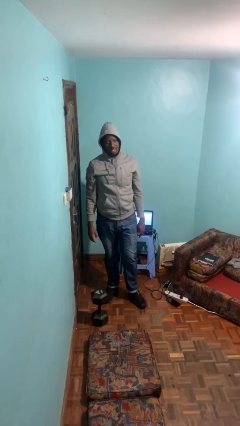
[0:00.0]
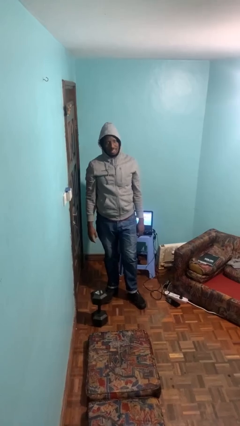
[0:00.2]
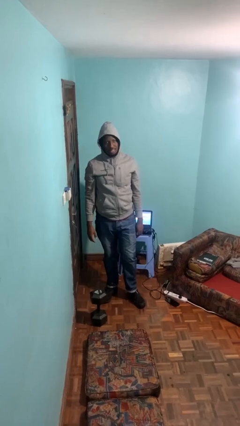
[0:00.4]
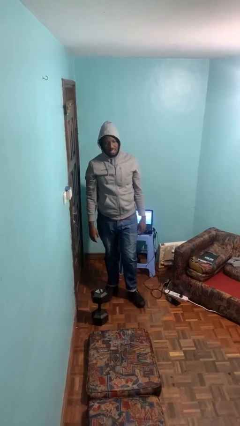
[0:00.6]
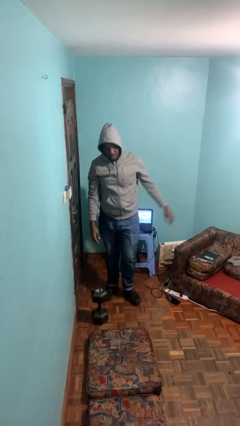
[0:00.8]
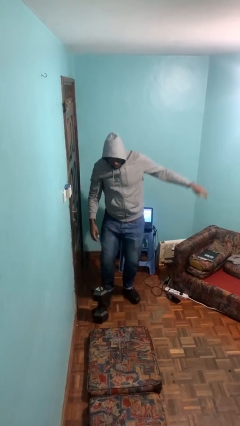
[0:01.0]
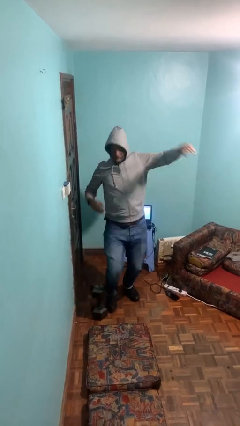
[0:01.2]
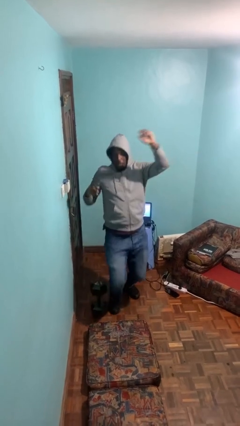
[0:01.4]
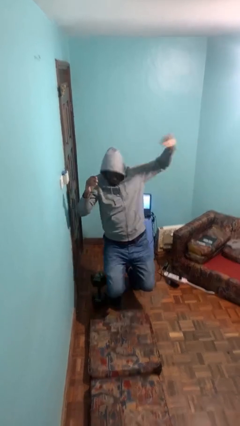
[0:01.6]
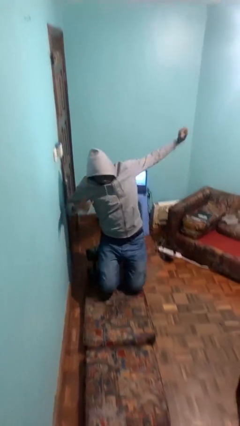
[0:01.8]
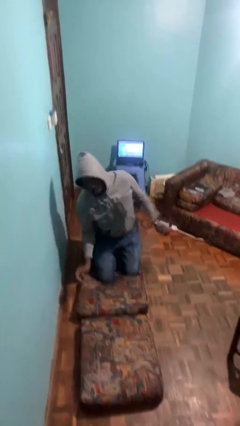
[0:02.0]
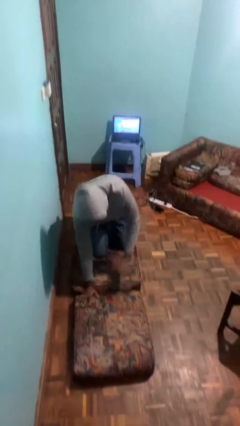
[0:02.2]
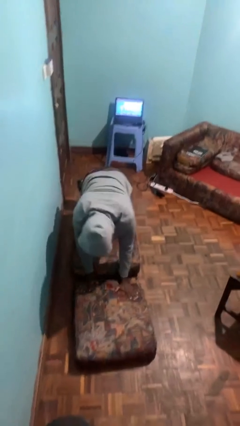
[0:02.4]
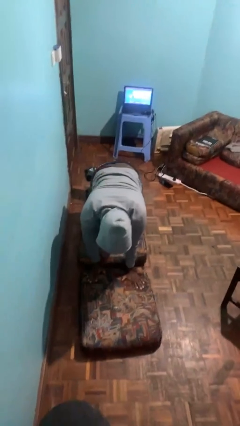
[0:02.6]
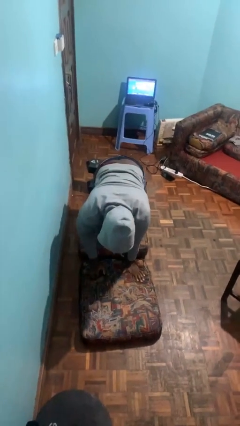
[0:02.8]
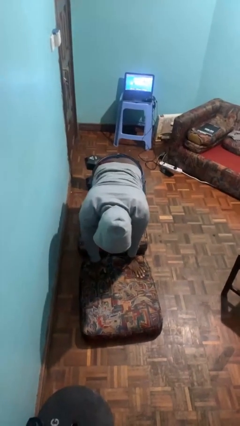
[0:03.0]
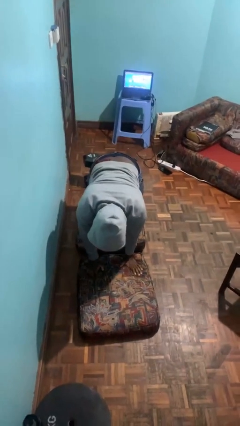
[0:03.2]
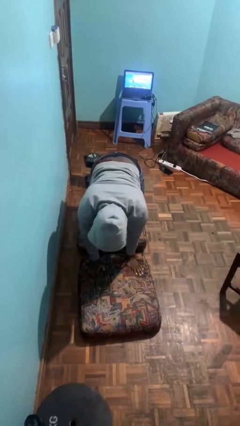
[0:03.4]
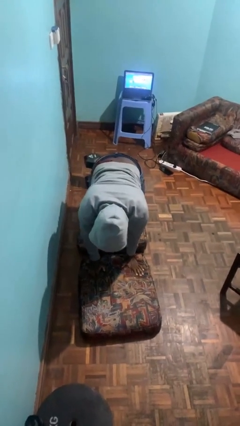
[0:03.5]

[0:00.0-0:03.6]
person trips on object on floor

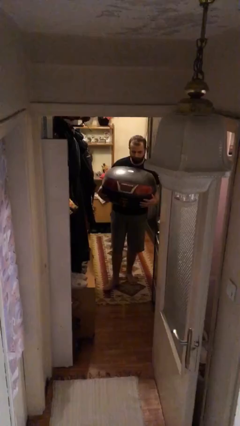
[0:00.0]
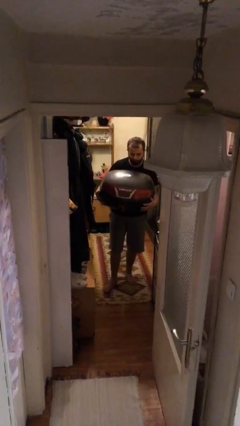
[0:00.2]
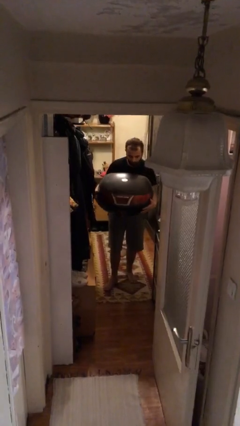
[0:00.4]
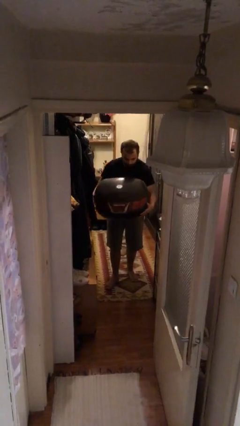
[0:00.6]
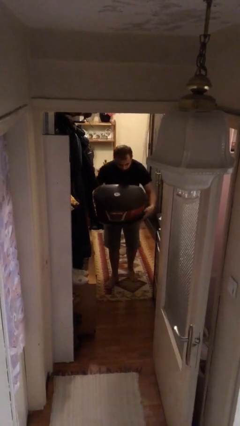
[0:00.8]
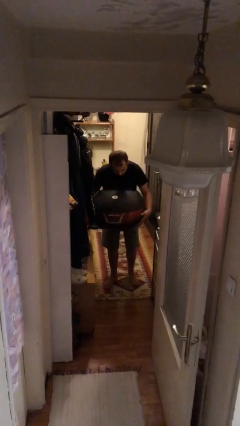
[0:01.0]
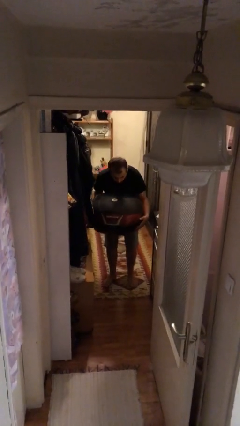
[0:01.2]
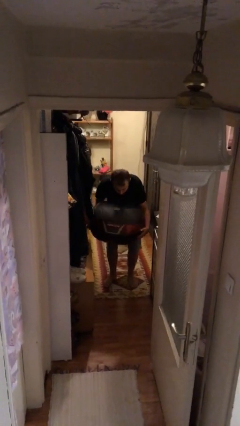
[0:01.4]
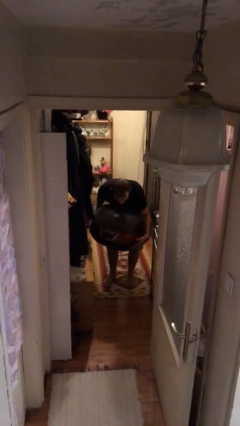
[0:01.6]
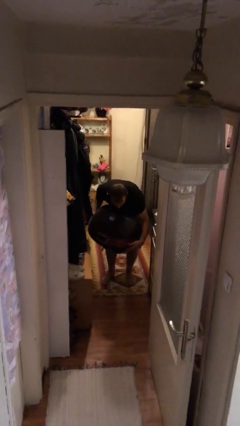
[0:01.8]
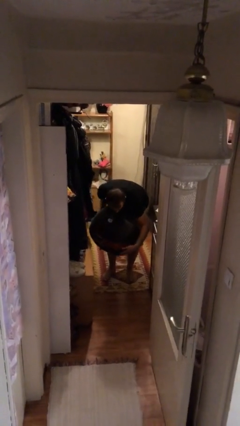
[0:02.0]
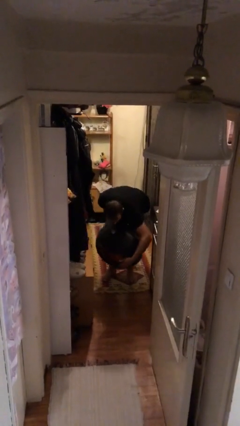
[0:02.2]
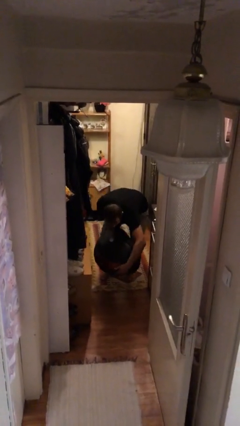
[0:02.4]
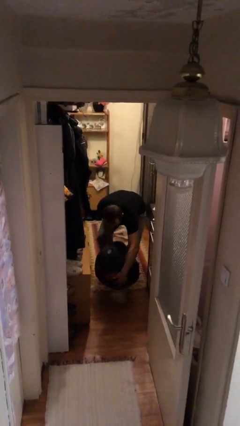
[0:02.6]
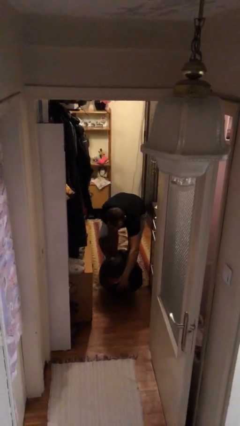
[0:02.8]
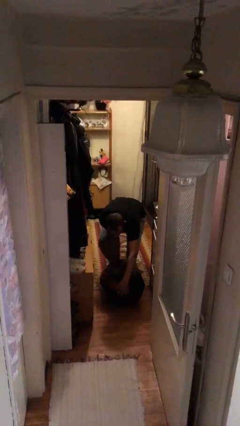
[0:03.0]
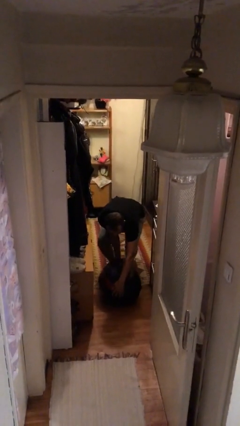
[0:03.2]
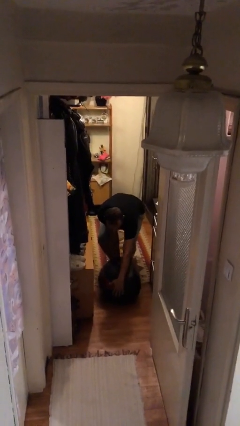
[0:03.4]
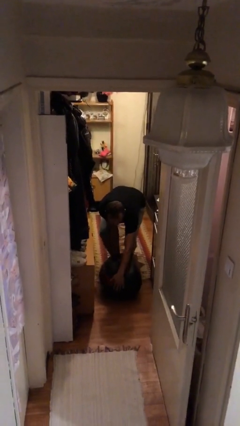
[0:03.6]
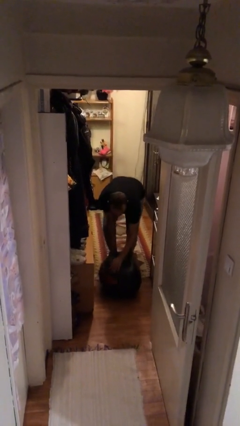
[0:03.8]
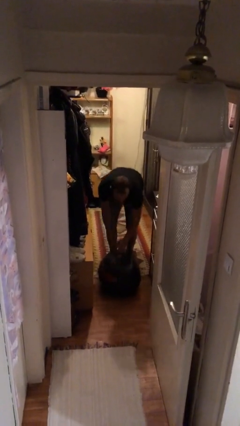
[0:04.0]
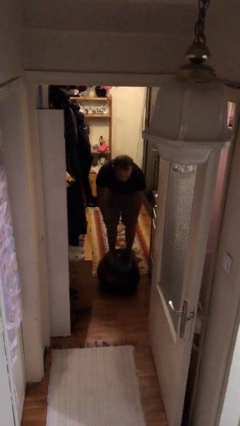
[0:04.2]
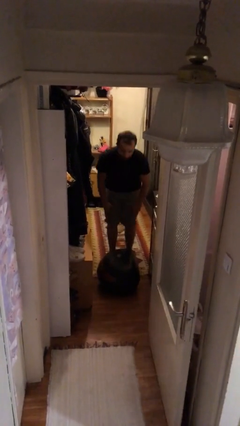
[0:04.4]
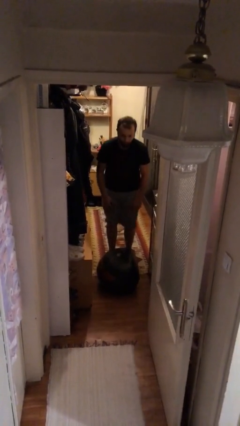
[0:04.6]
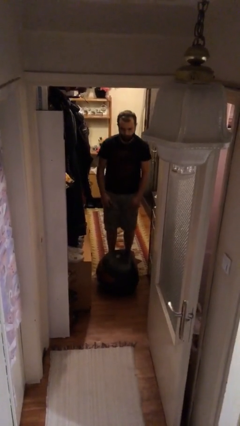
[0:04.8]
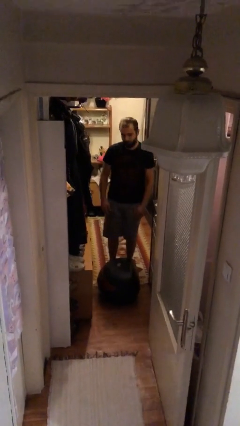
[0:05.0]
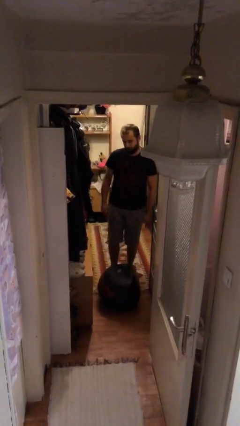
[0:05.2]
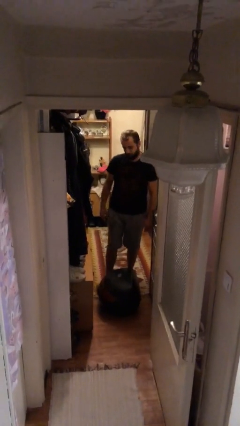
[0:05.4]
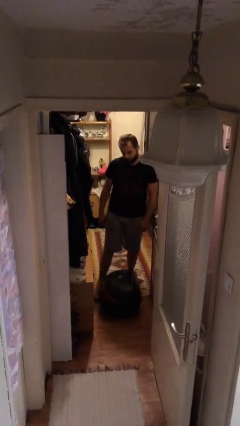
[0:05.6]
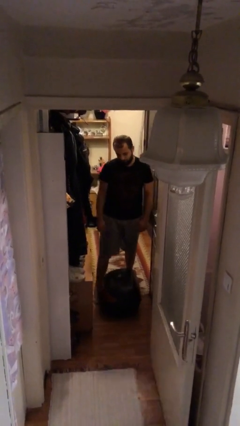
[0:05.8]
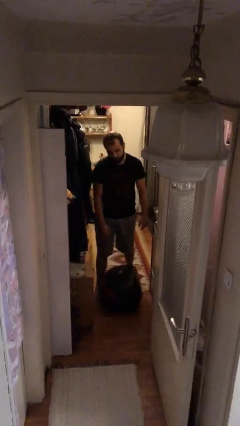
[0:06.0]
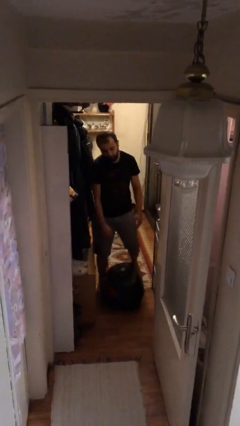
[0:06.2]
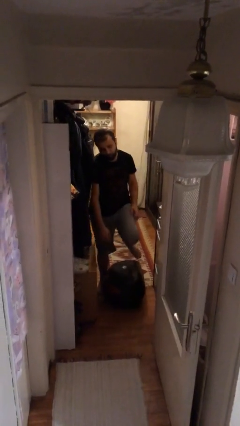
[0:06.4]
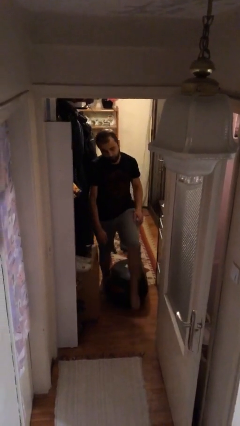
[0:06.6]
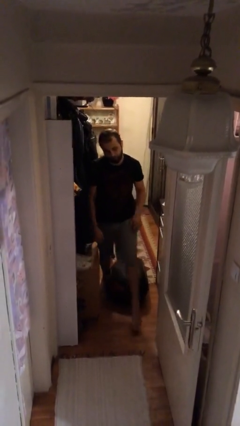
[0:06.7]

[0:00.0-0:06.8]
person puts down object on floor

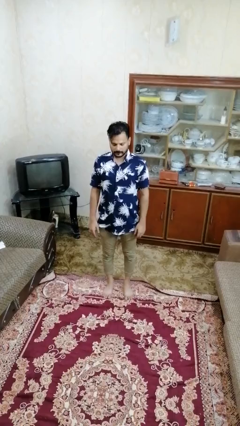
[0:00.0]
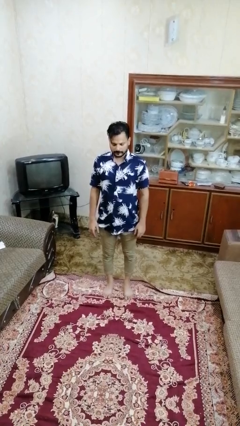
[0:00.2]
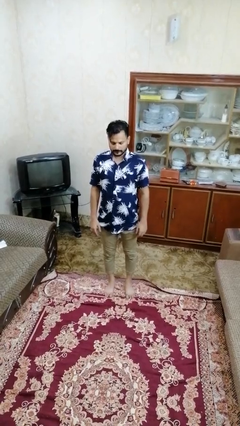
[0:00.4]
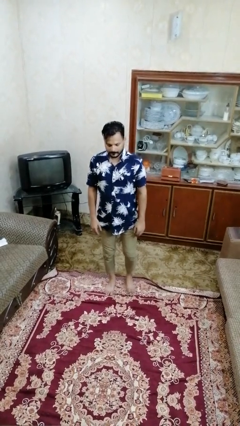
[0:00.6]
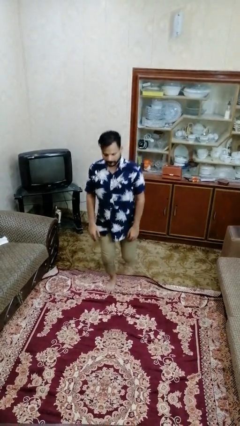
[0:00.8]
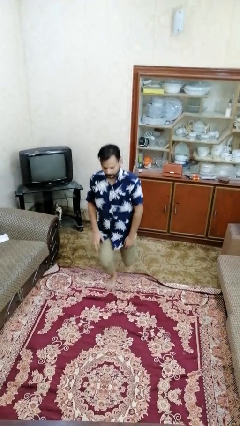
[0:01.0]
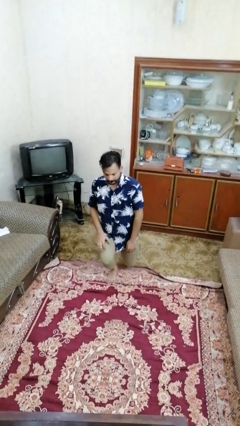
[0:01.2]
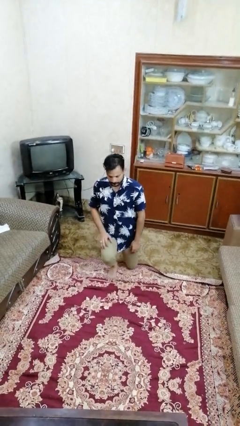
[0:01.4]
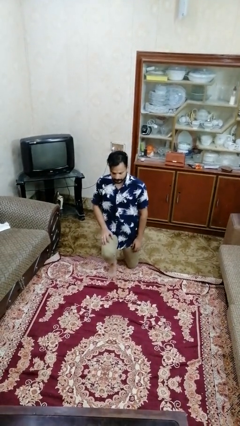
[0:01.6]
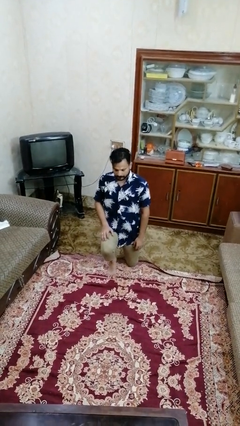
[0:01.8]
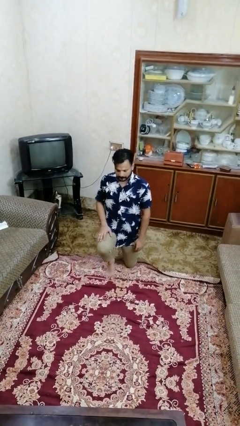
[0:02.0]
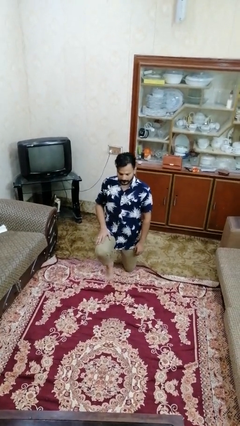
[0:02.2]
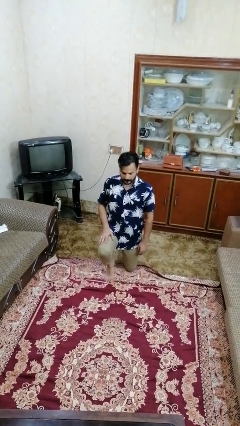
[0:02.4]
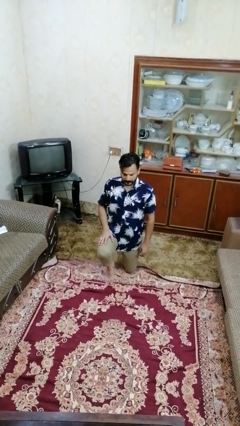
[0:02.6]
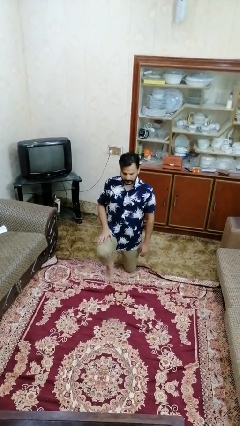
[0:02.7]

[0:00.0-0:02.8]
person kneels

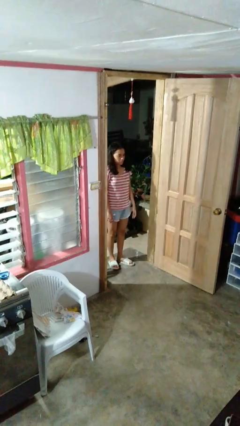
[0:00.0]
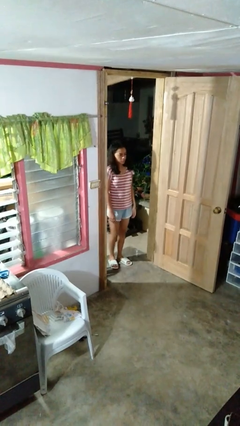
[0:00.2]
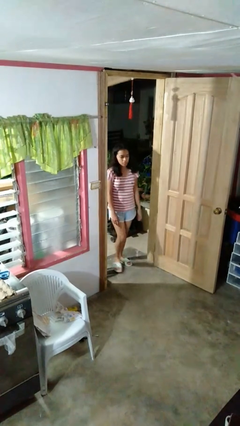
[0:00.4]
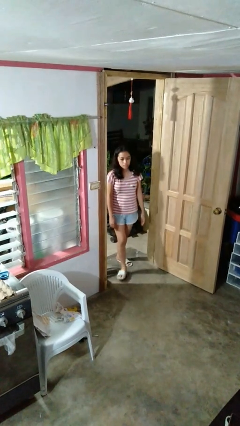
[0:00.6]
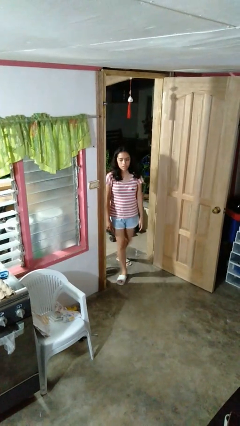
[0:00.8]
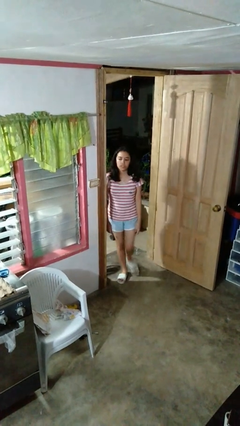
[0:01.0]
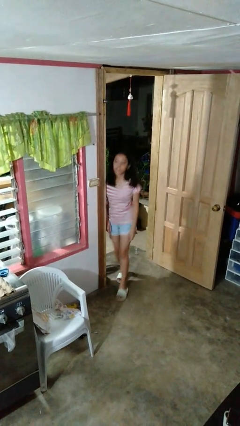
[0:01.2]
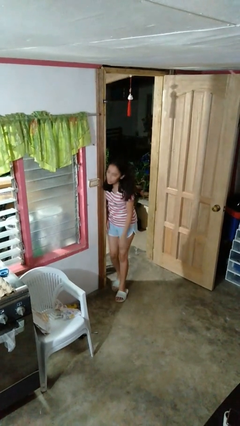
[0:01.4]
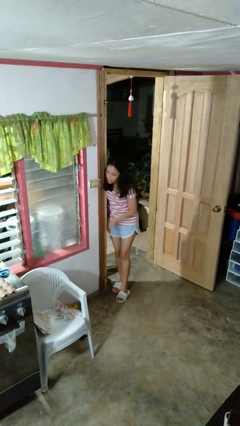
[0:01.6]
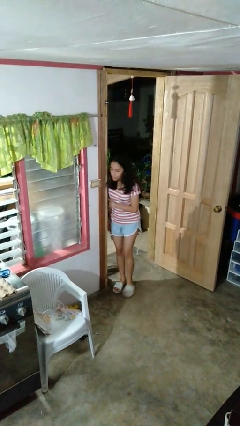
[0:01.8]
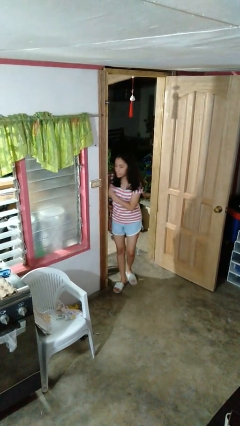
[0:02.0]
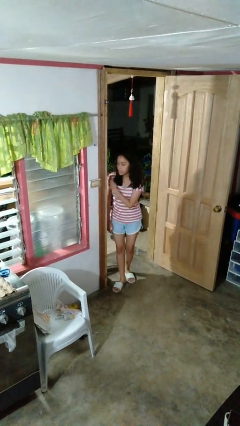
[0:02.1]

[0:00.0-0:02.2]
person bumps into wall

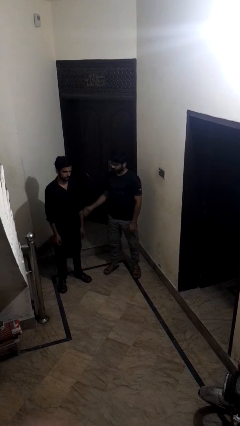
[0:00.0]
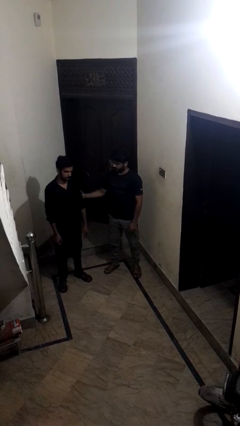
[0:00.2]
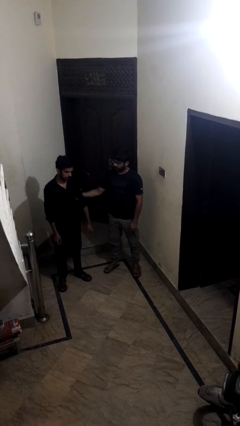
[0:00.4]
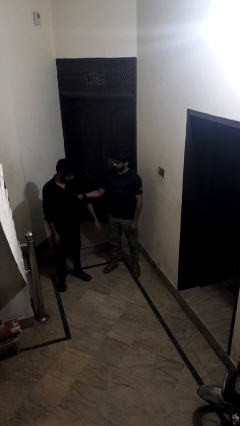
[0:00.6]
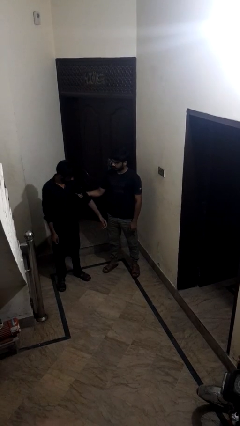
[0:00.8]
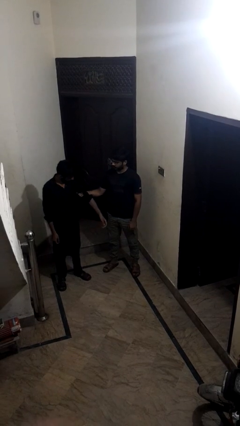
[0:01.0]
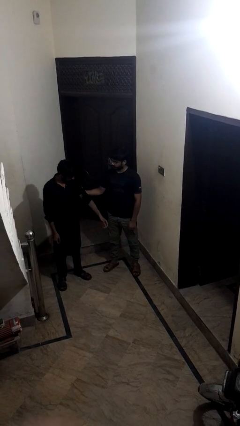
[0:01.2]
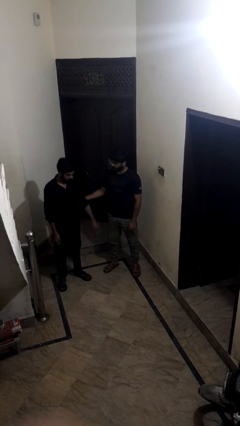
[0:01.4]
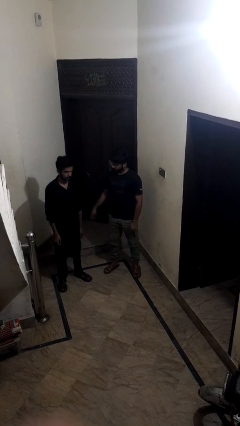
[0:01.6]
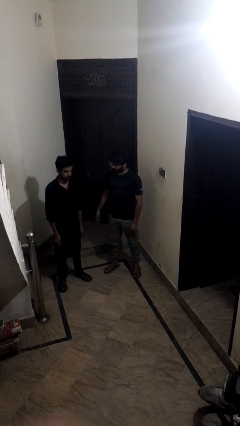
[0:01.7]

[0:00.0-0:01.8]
person grabs person by bicep

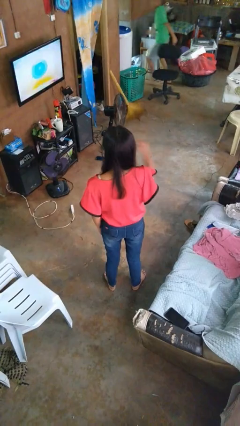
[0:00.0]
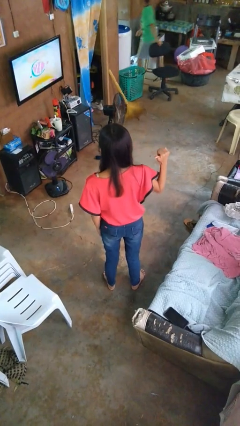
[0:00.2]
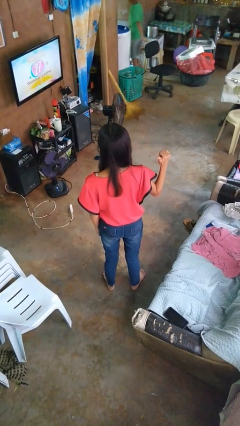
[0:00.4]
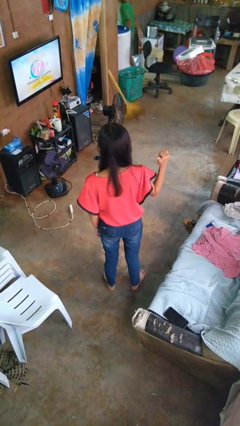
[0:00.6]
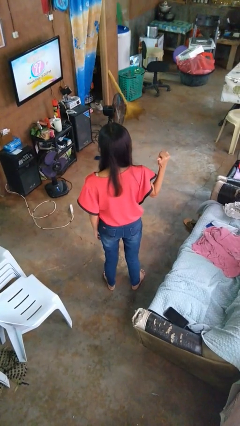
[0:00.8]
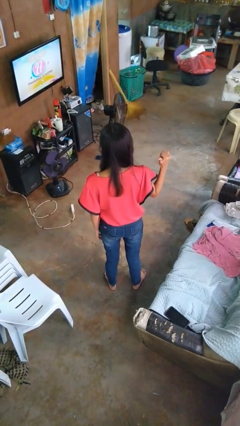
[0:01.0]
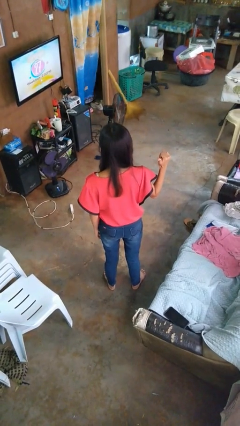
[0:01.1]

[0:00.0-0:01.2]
person gestures cut
